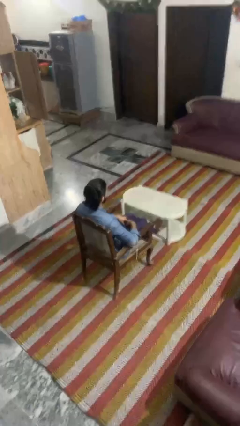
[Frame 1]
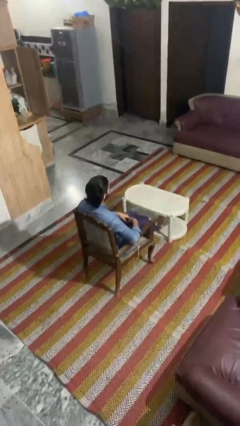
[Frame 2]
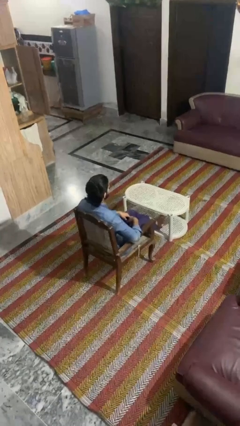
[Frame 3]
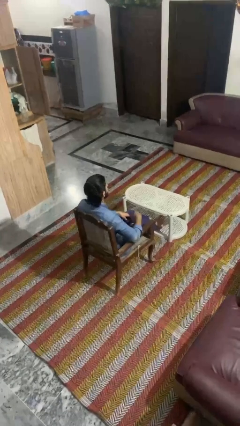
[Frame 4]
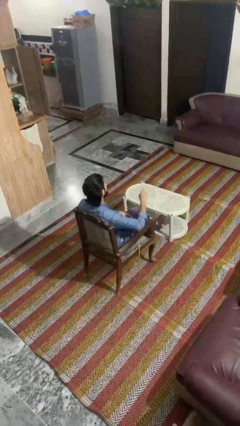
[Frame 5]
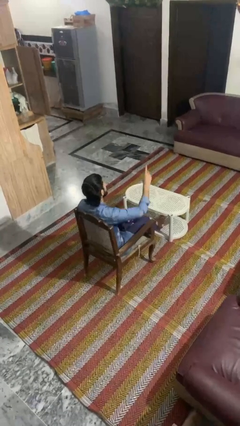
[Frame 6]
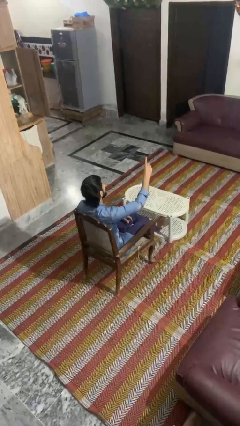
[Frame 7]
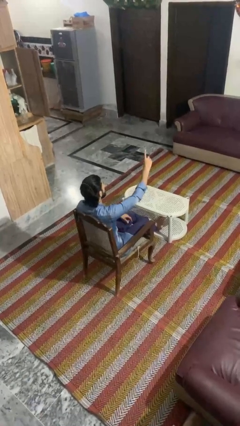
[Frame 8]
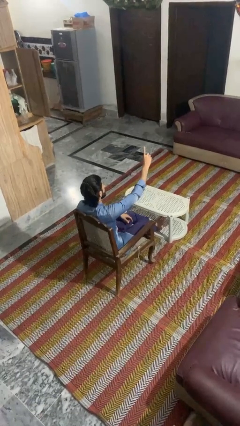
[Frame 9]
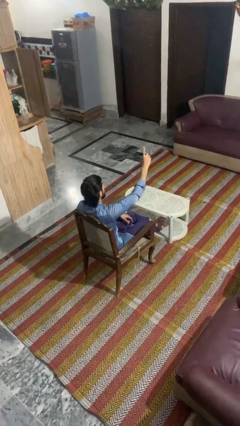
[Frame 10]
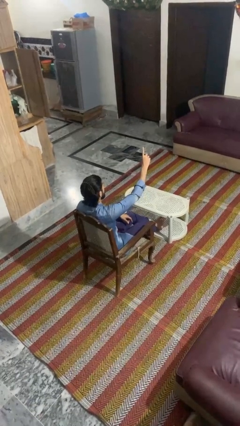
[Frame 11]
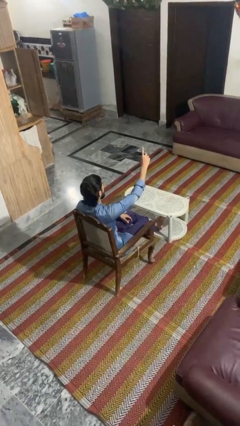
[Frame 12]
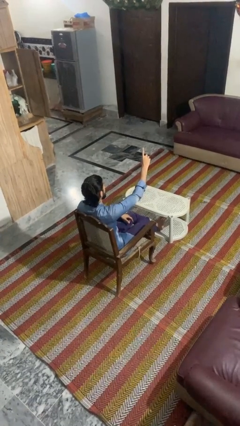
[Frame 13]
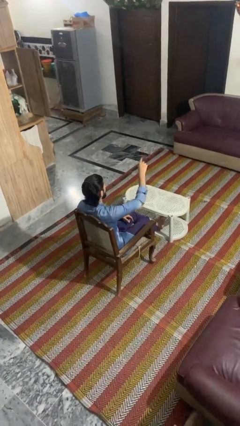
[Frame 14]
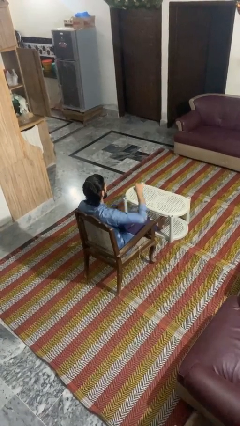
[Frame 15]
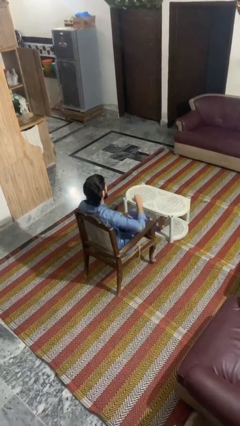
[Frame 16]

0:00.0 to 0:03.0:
person gestures number one

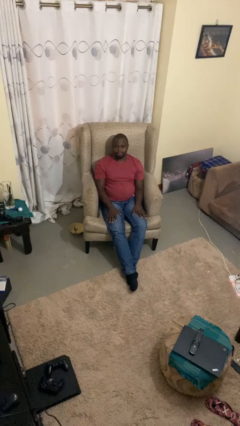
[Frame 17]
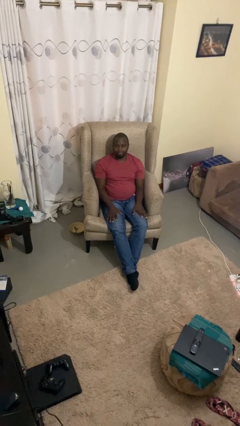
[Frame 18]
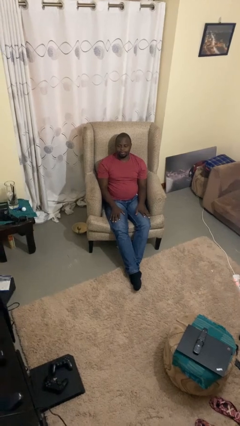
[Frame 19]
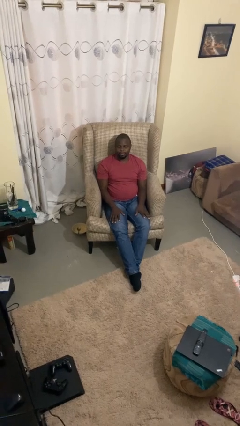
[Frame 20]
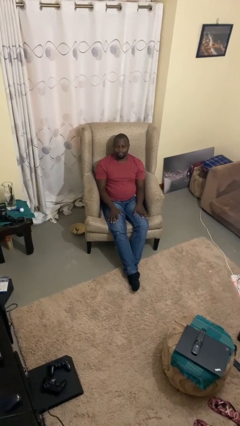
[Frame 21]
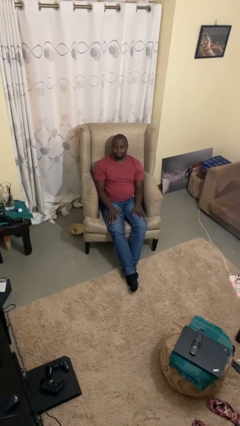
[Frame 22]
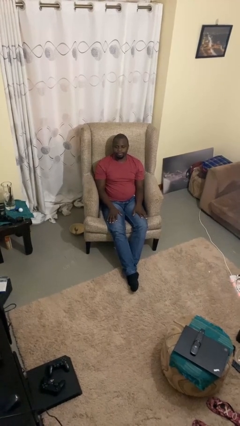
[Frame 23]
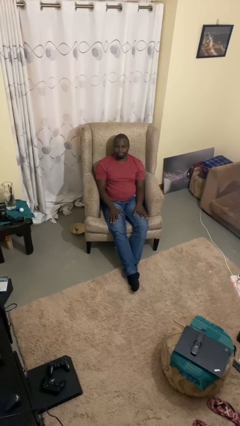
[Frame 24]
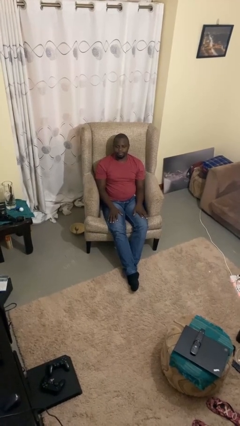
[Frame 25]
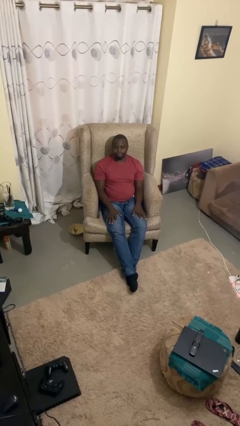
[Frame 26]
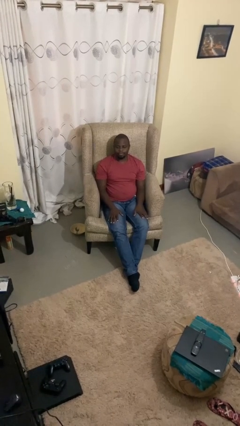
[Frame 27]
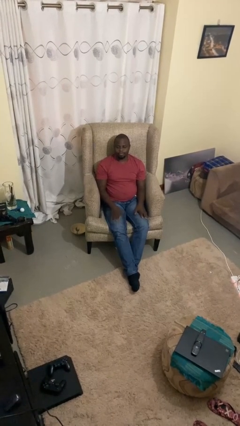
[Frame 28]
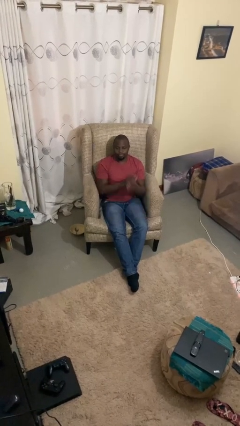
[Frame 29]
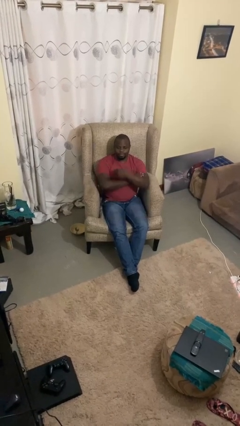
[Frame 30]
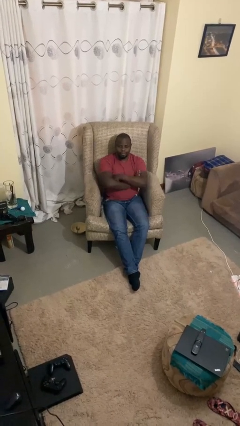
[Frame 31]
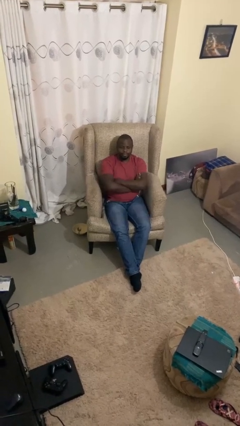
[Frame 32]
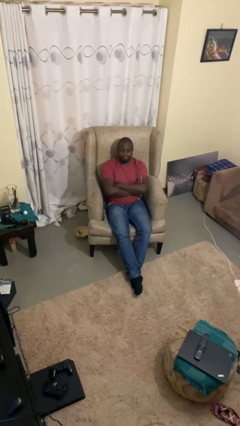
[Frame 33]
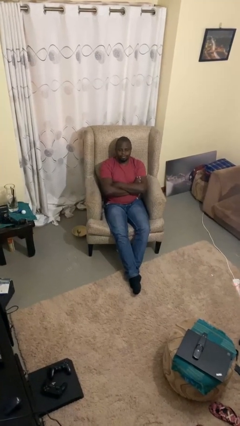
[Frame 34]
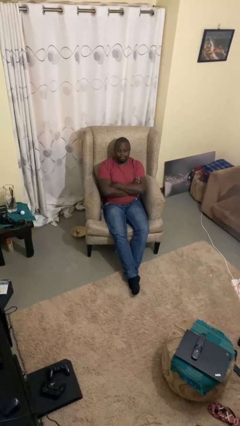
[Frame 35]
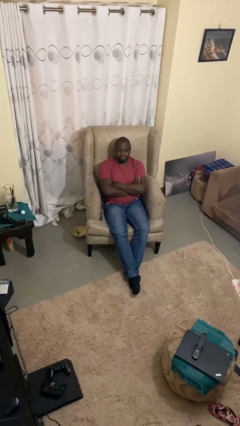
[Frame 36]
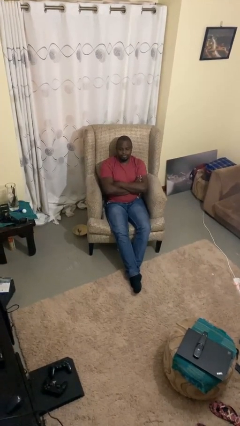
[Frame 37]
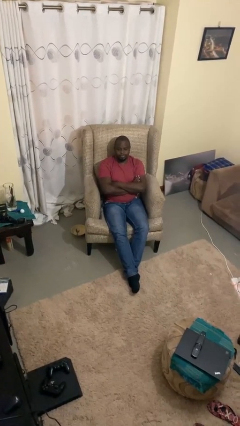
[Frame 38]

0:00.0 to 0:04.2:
person crosses arms

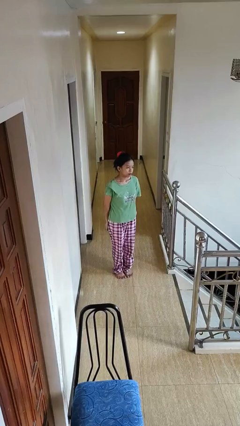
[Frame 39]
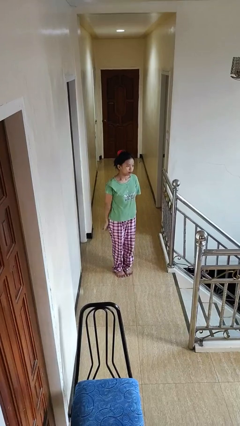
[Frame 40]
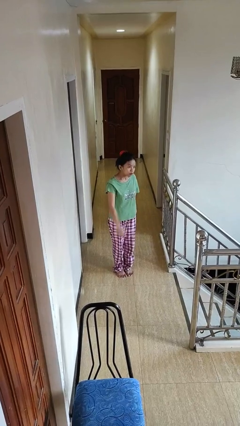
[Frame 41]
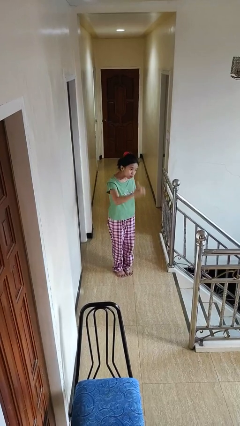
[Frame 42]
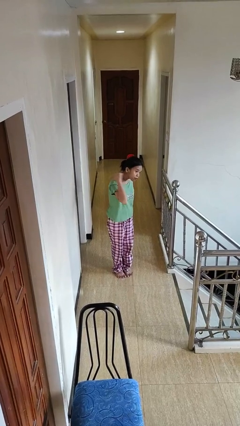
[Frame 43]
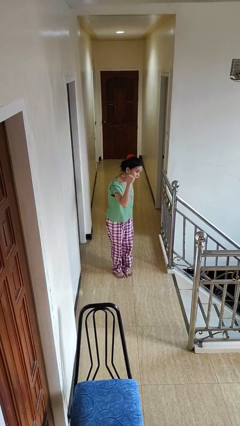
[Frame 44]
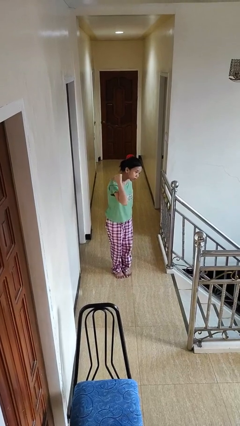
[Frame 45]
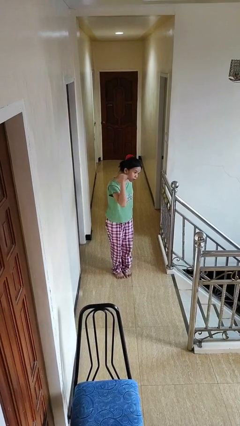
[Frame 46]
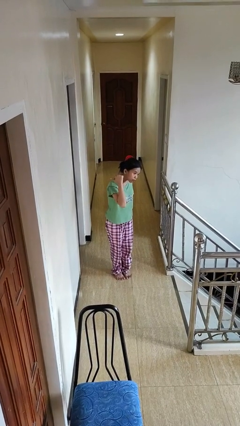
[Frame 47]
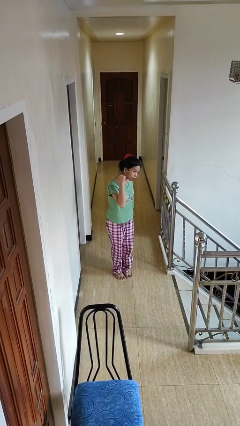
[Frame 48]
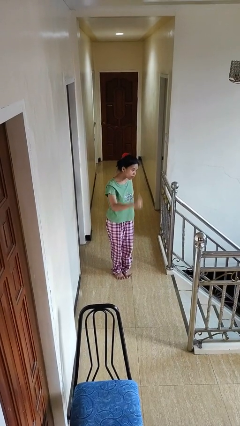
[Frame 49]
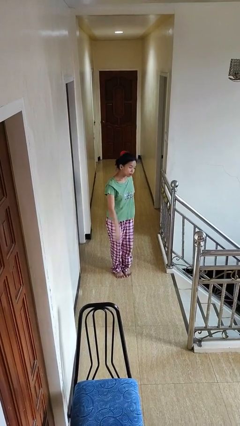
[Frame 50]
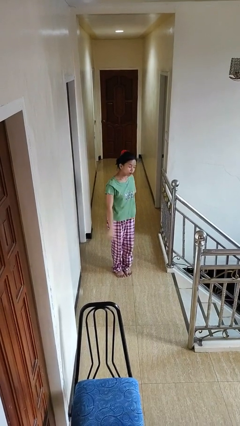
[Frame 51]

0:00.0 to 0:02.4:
person gestures behind me

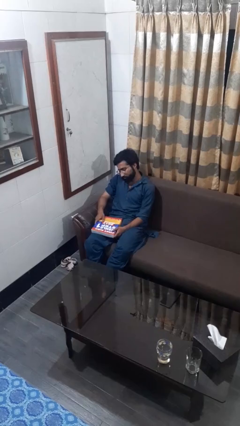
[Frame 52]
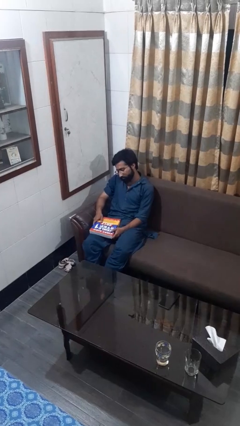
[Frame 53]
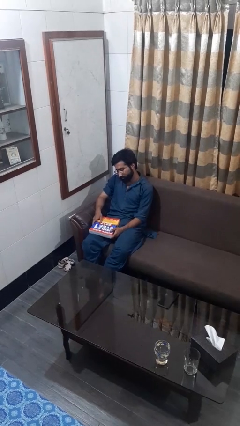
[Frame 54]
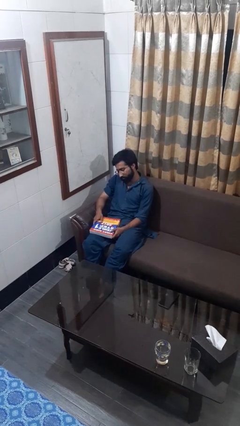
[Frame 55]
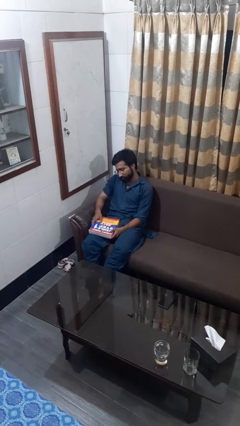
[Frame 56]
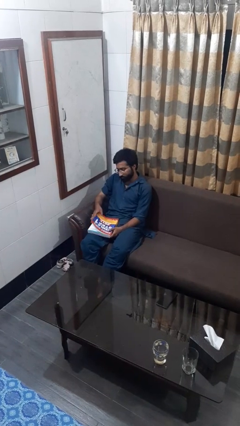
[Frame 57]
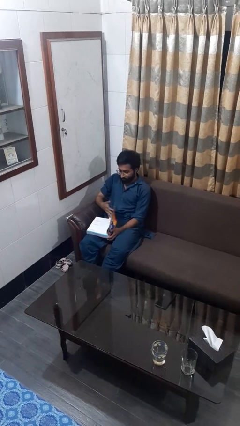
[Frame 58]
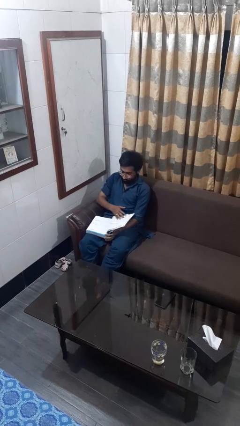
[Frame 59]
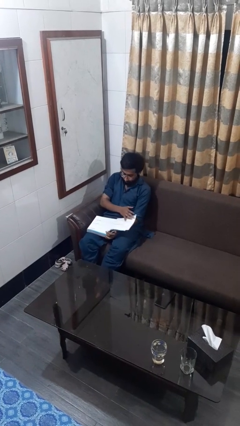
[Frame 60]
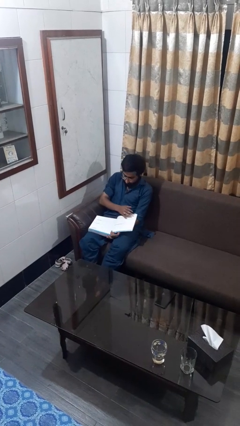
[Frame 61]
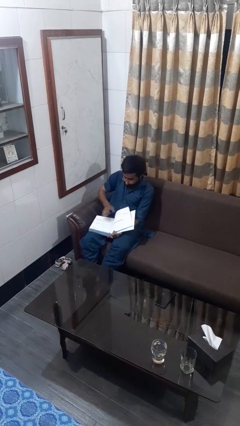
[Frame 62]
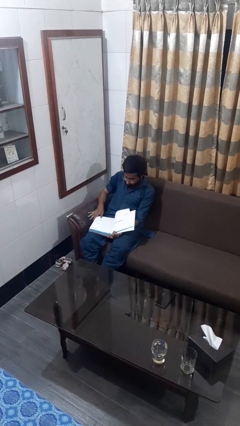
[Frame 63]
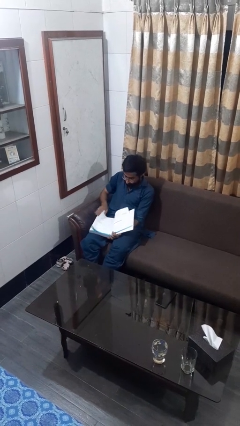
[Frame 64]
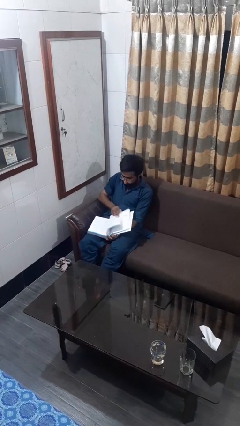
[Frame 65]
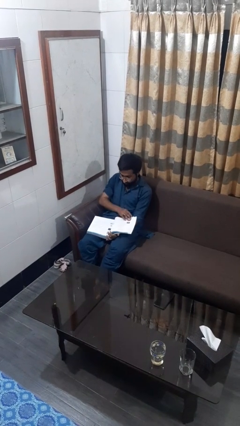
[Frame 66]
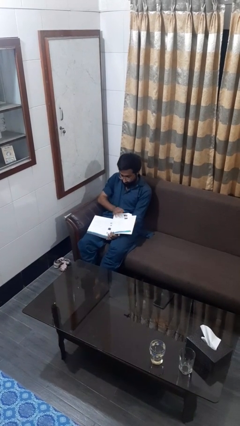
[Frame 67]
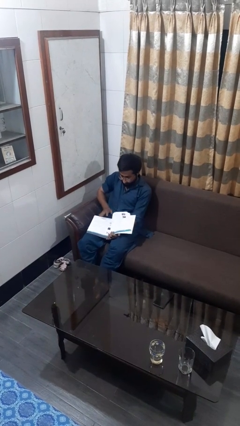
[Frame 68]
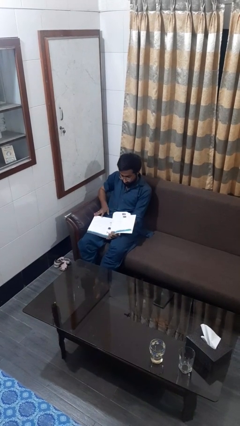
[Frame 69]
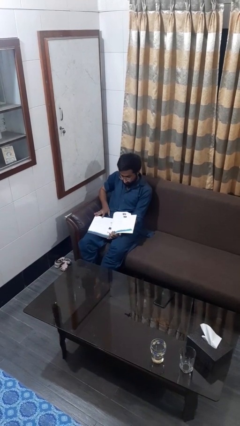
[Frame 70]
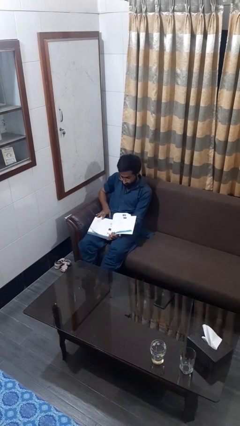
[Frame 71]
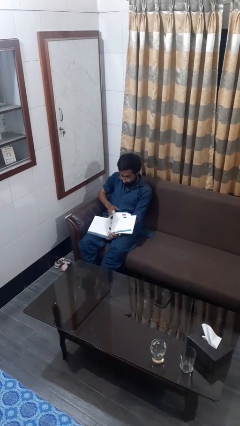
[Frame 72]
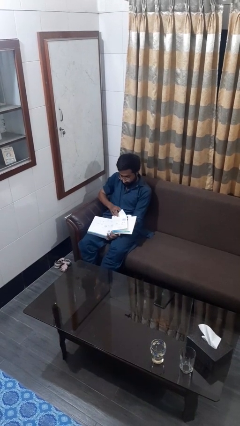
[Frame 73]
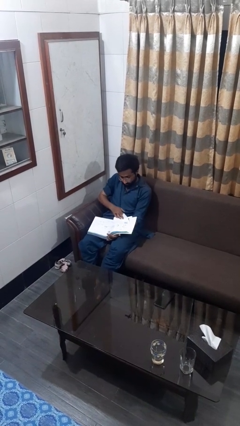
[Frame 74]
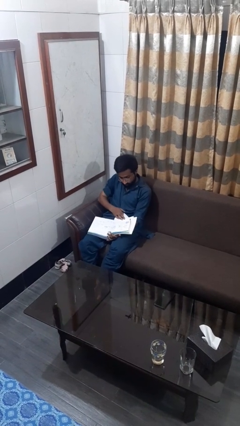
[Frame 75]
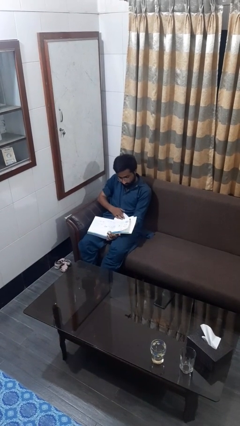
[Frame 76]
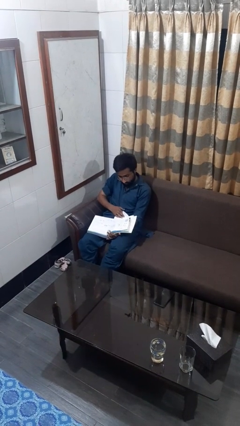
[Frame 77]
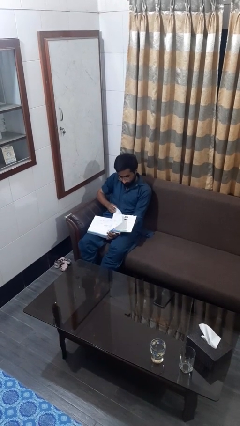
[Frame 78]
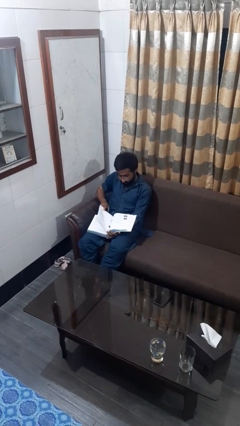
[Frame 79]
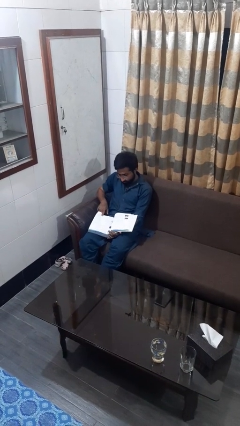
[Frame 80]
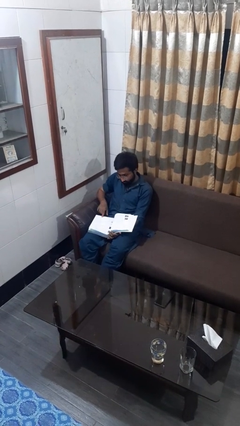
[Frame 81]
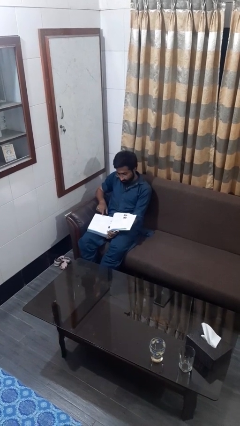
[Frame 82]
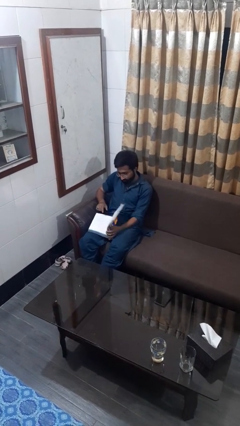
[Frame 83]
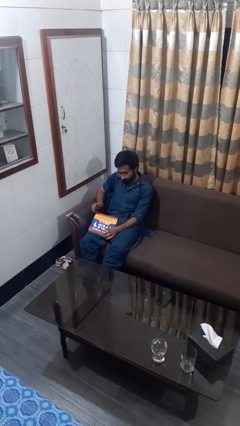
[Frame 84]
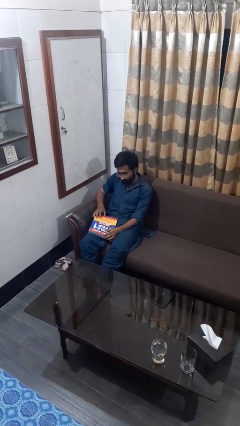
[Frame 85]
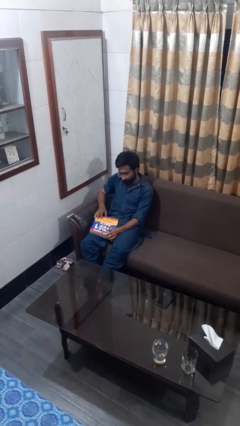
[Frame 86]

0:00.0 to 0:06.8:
person reads book

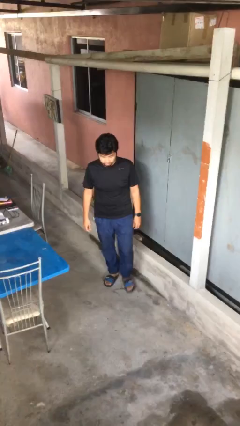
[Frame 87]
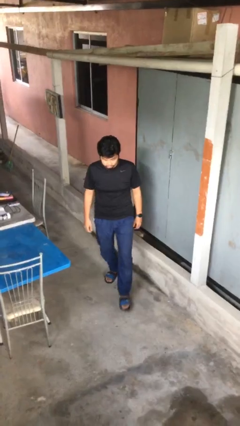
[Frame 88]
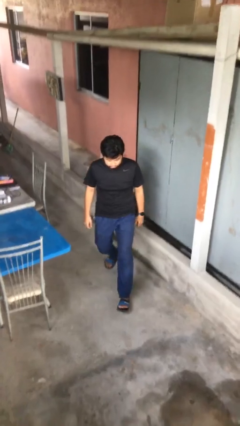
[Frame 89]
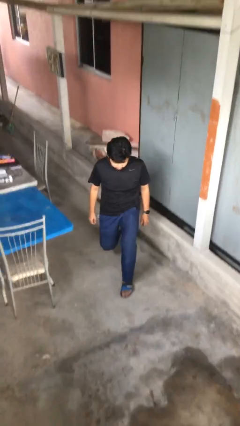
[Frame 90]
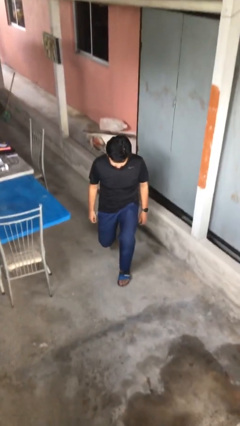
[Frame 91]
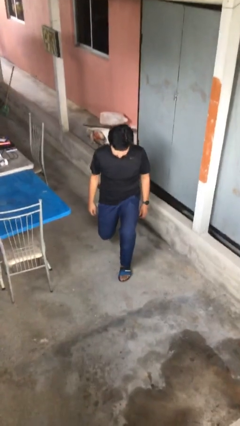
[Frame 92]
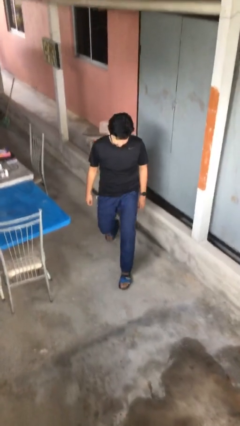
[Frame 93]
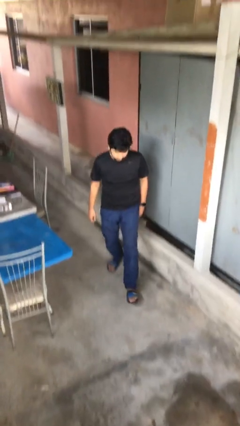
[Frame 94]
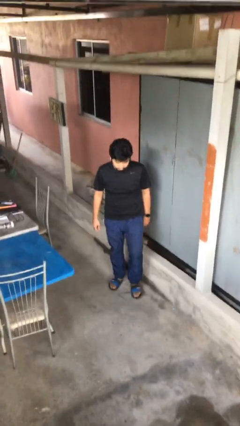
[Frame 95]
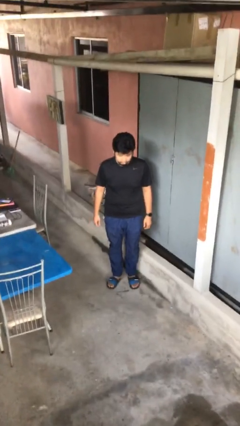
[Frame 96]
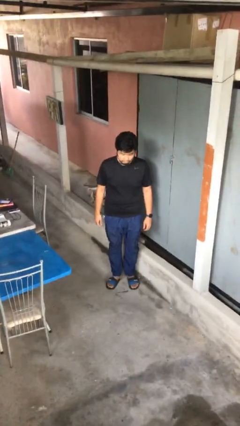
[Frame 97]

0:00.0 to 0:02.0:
person exercises with lunges
